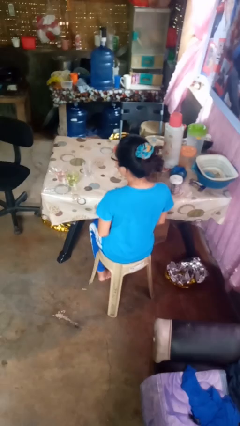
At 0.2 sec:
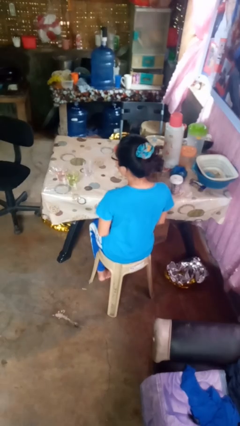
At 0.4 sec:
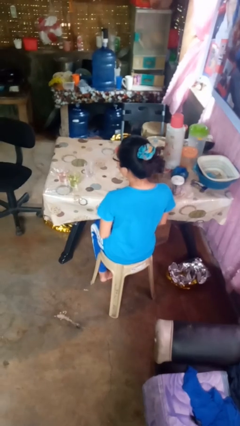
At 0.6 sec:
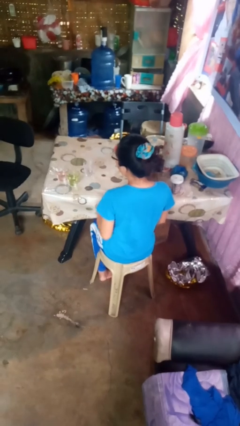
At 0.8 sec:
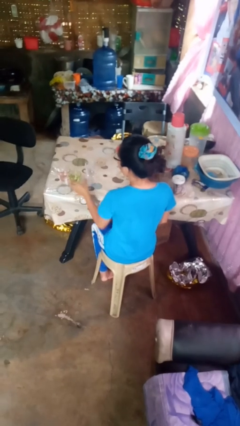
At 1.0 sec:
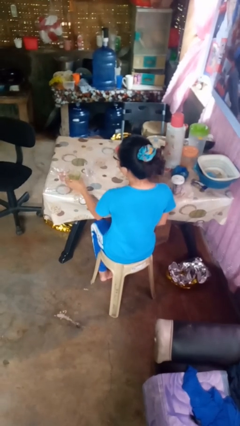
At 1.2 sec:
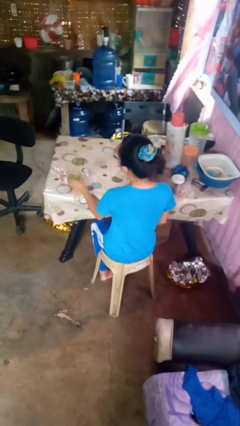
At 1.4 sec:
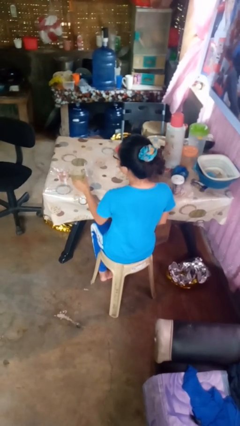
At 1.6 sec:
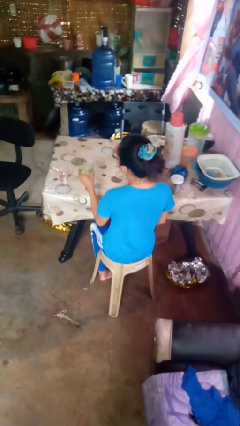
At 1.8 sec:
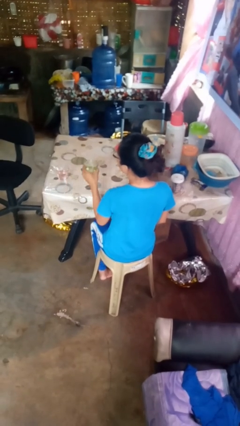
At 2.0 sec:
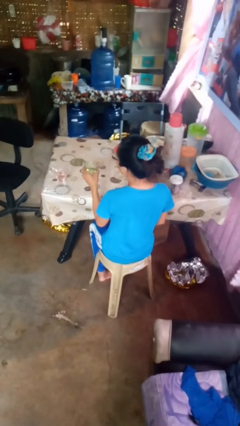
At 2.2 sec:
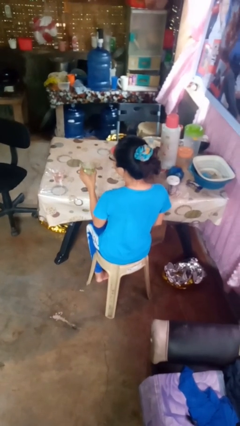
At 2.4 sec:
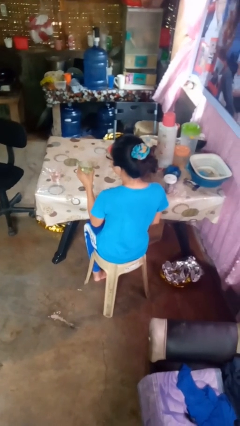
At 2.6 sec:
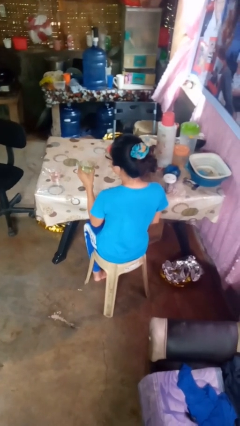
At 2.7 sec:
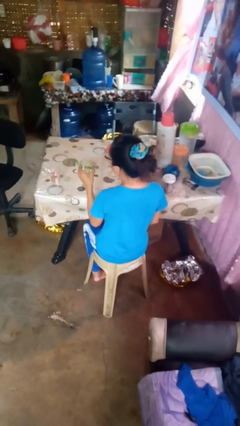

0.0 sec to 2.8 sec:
person picks up object from table

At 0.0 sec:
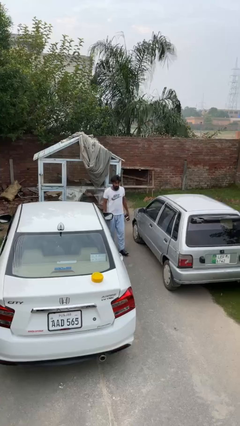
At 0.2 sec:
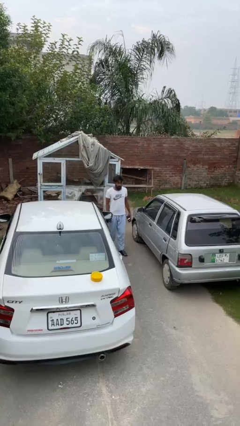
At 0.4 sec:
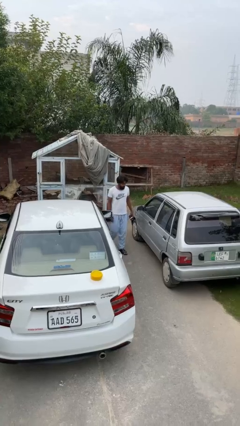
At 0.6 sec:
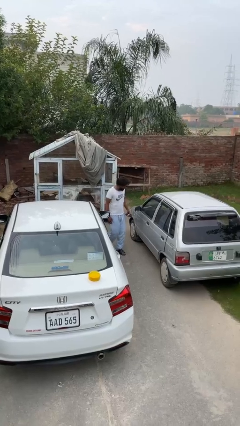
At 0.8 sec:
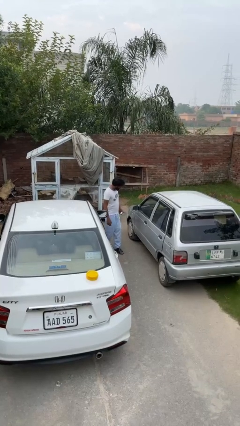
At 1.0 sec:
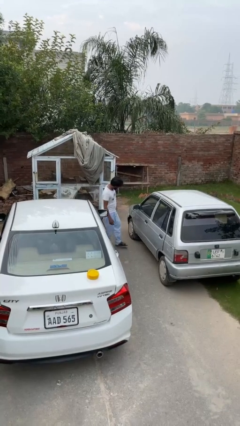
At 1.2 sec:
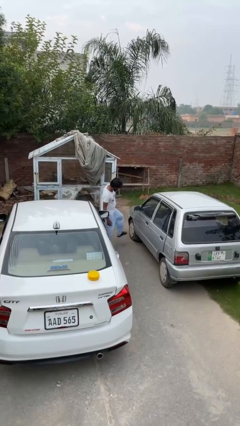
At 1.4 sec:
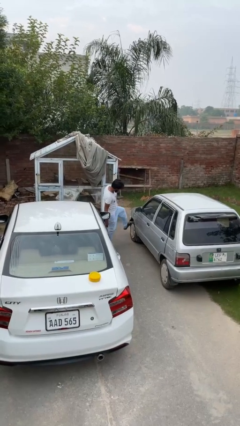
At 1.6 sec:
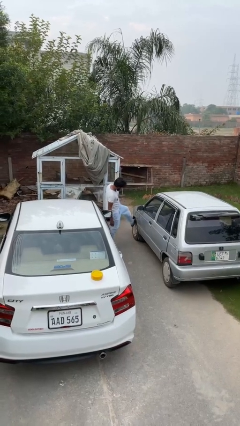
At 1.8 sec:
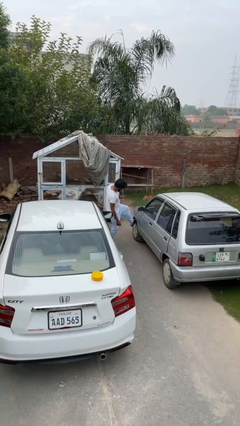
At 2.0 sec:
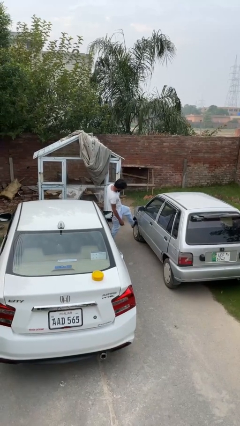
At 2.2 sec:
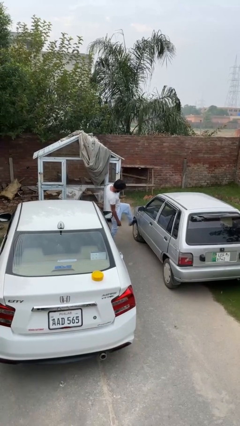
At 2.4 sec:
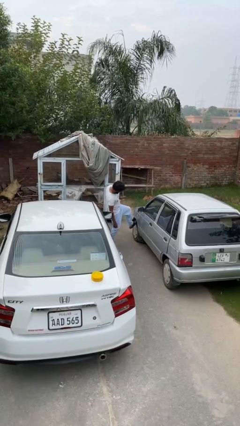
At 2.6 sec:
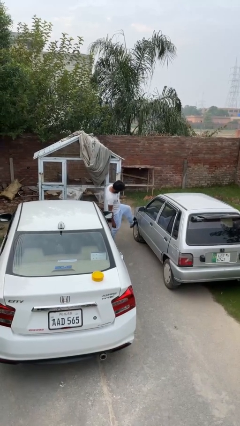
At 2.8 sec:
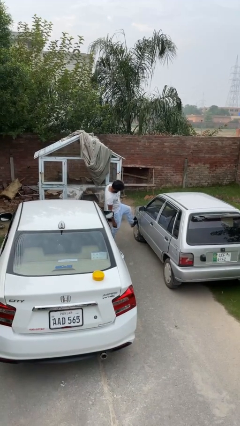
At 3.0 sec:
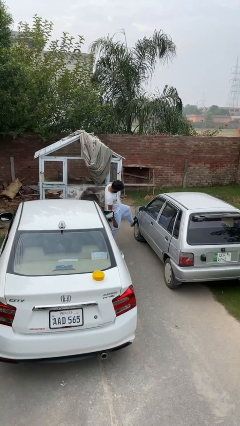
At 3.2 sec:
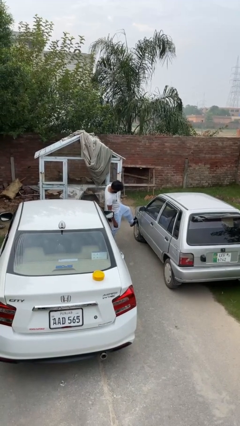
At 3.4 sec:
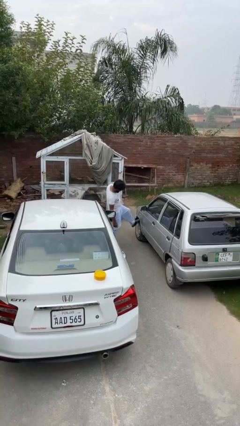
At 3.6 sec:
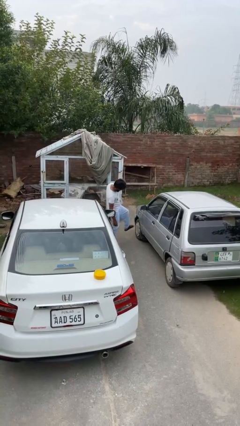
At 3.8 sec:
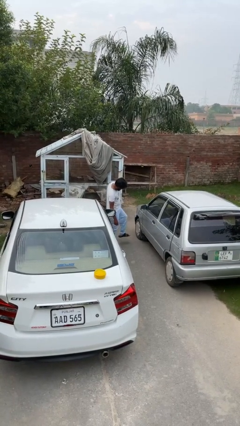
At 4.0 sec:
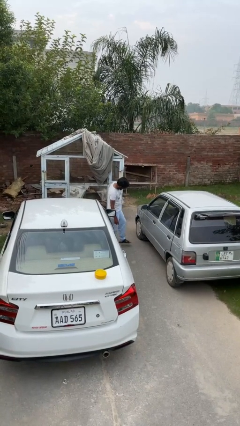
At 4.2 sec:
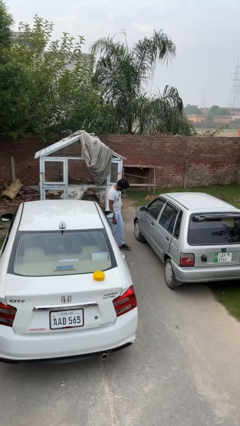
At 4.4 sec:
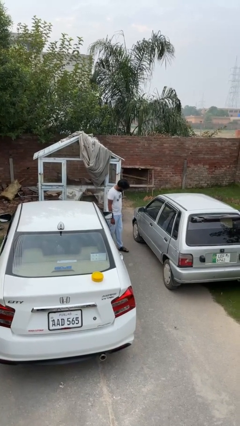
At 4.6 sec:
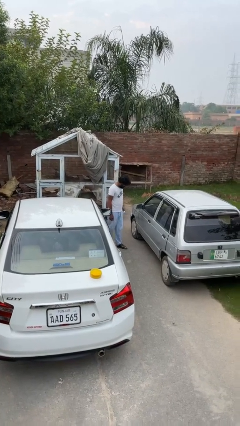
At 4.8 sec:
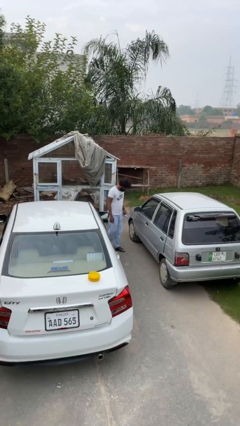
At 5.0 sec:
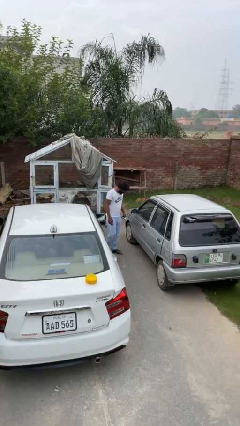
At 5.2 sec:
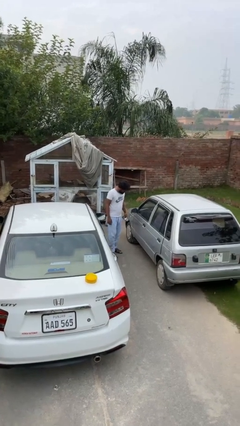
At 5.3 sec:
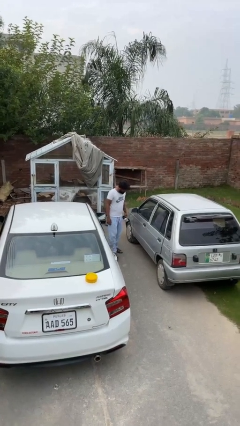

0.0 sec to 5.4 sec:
person kicks car tires

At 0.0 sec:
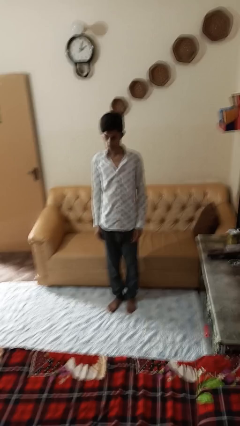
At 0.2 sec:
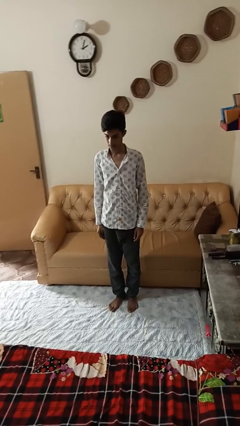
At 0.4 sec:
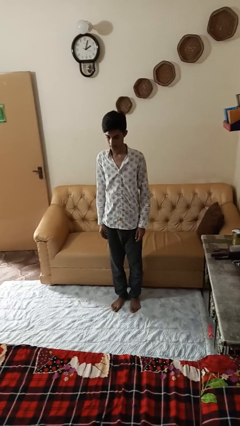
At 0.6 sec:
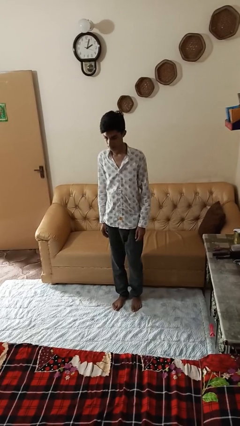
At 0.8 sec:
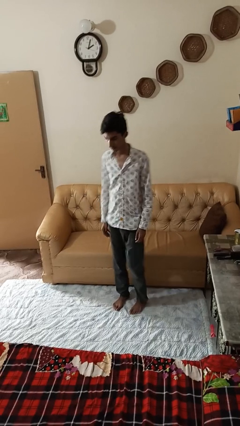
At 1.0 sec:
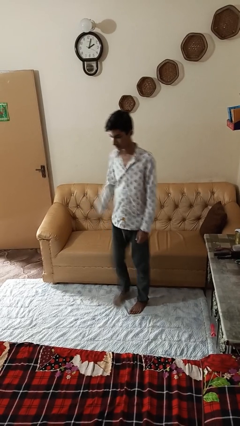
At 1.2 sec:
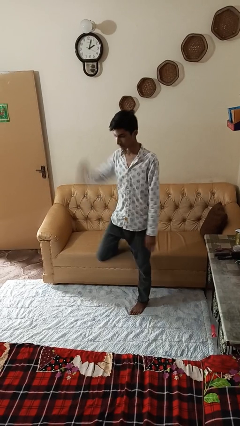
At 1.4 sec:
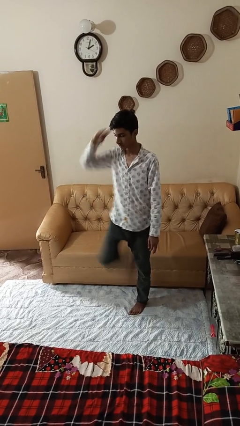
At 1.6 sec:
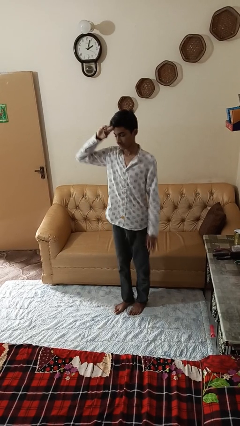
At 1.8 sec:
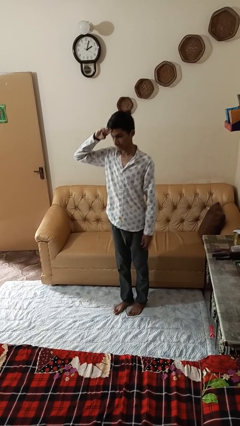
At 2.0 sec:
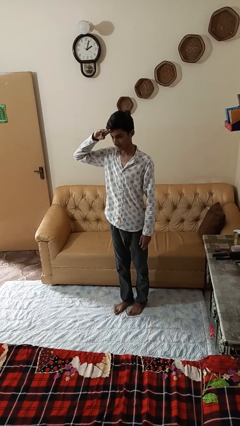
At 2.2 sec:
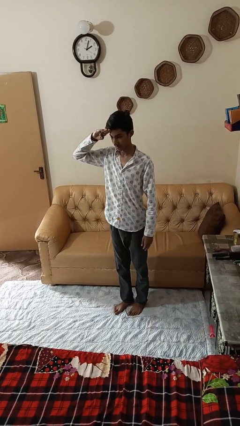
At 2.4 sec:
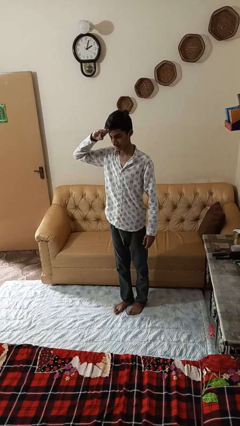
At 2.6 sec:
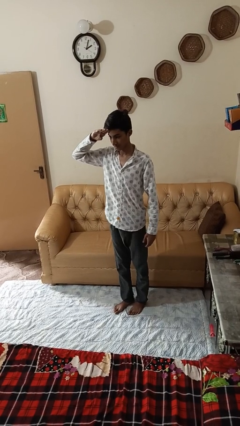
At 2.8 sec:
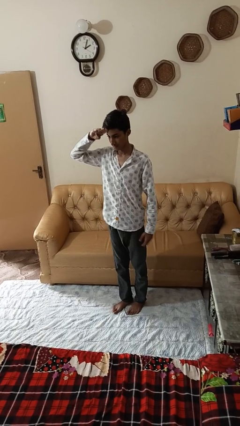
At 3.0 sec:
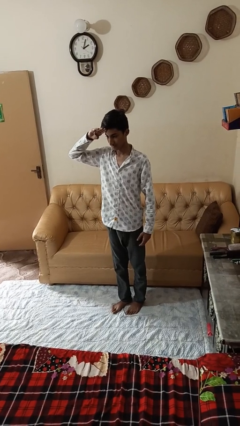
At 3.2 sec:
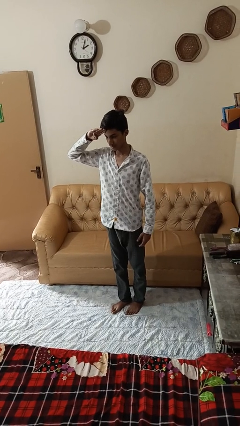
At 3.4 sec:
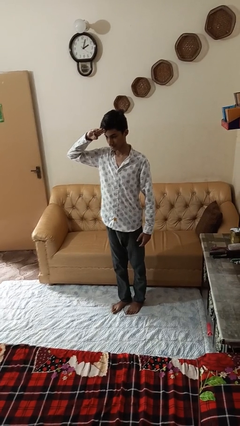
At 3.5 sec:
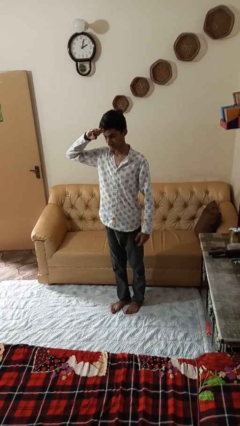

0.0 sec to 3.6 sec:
person salutes

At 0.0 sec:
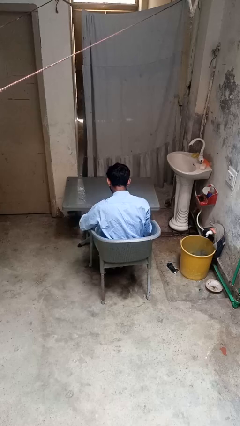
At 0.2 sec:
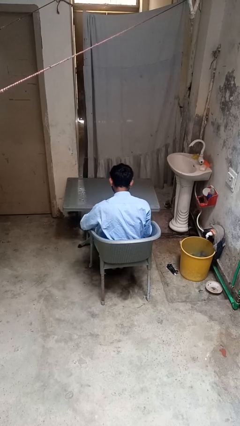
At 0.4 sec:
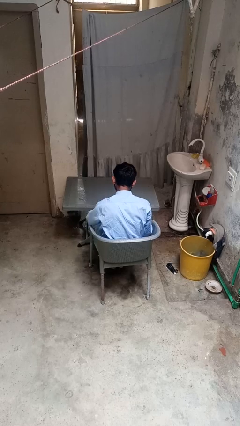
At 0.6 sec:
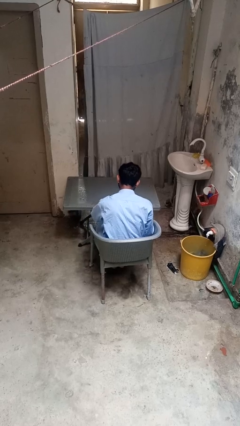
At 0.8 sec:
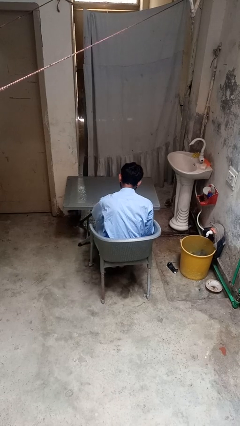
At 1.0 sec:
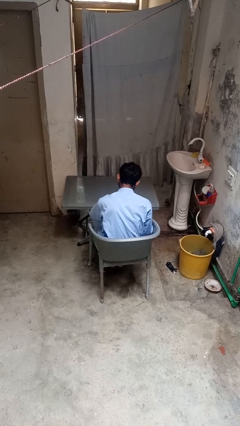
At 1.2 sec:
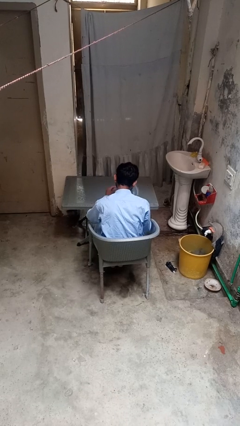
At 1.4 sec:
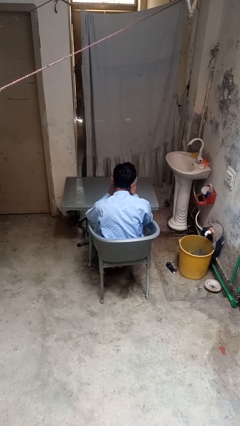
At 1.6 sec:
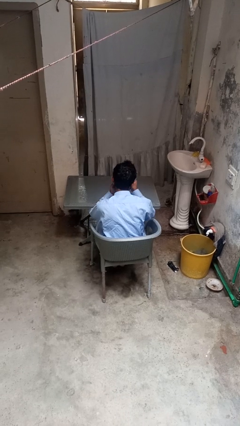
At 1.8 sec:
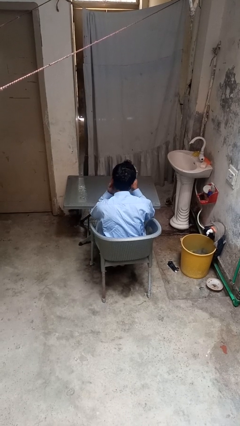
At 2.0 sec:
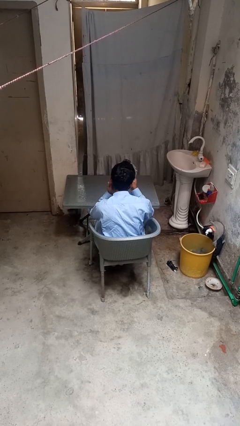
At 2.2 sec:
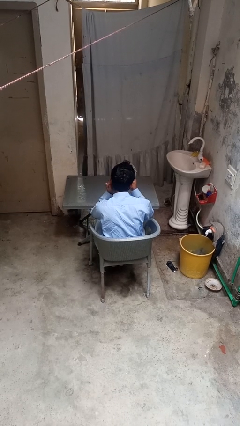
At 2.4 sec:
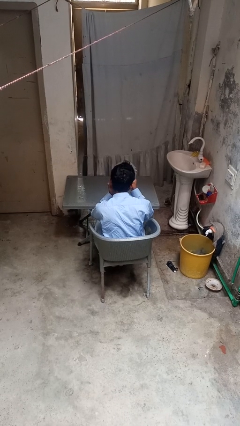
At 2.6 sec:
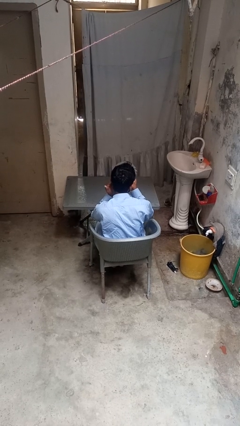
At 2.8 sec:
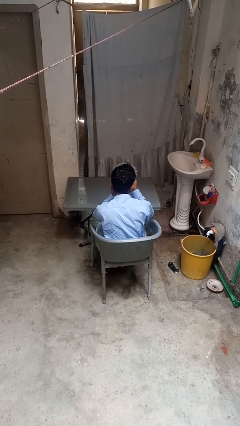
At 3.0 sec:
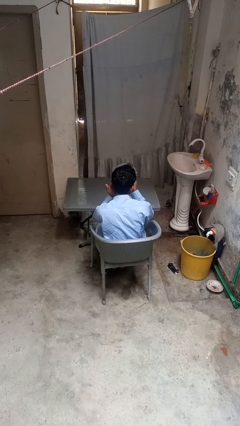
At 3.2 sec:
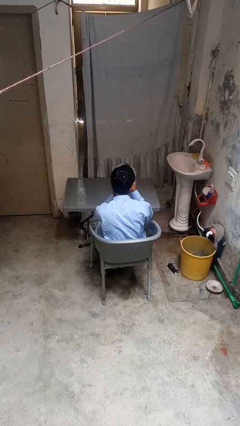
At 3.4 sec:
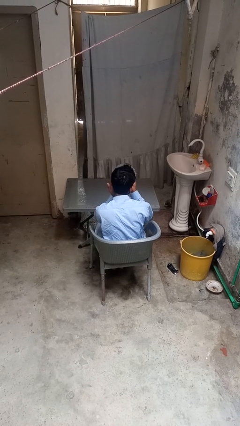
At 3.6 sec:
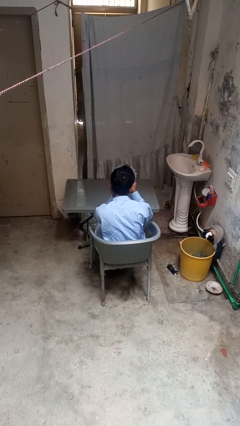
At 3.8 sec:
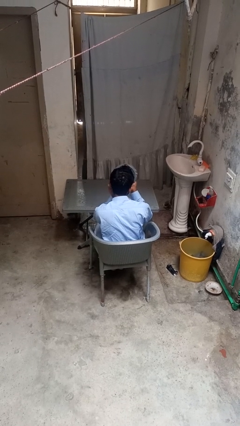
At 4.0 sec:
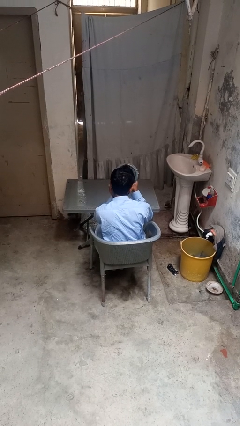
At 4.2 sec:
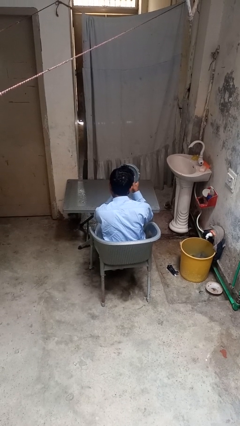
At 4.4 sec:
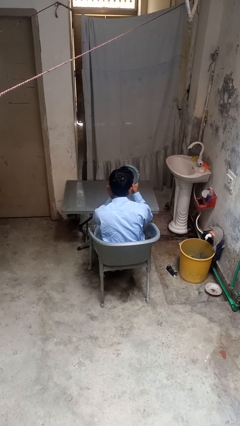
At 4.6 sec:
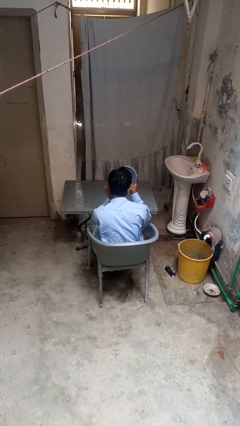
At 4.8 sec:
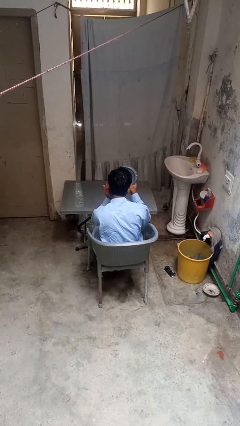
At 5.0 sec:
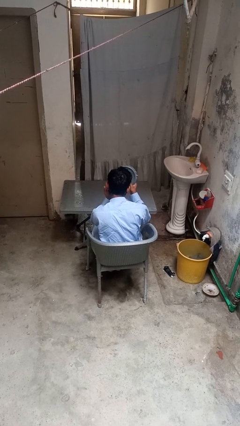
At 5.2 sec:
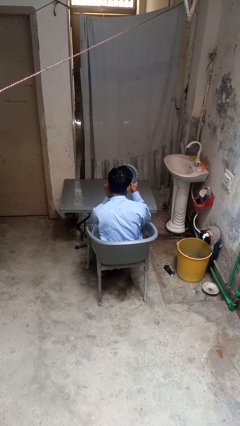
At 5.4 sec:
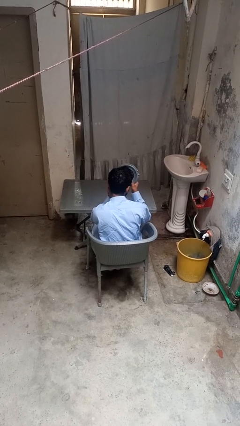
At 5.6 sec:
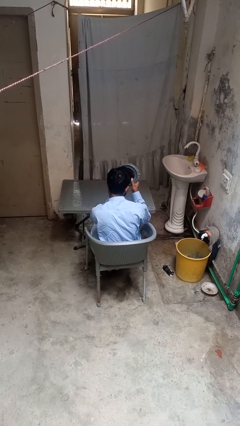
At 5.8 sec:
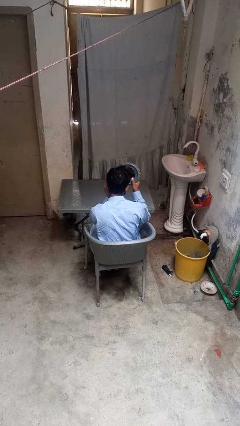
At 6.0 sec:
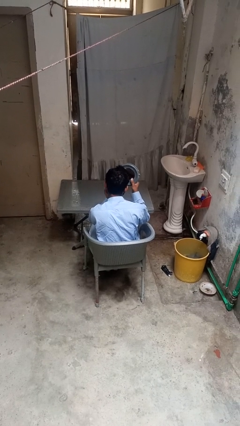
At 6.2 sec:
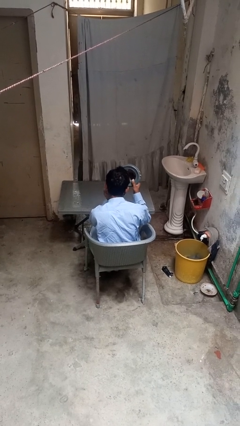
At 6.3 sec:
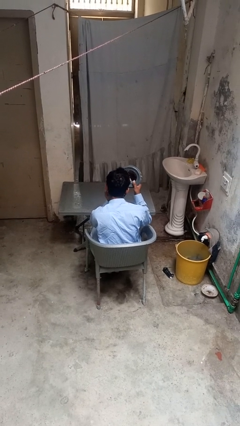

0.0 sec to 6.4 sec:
person applies foundation makeup
